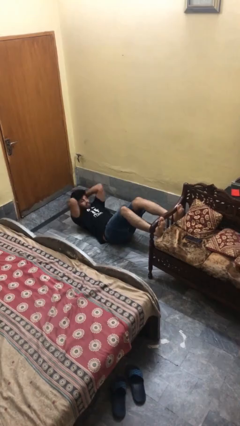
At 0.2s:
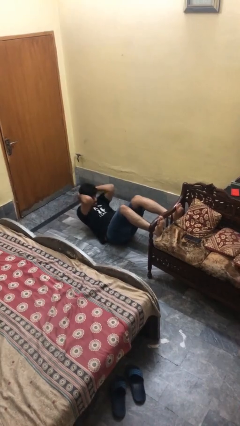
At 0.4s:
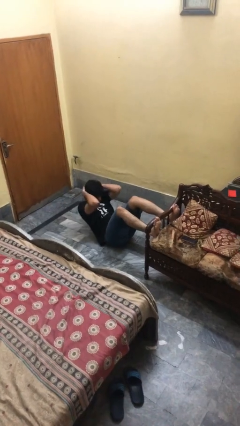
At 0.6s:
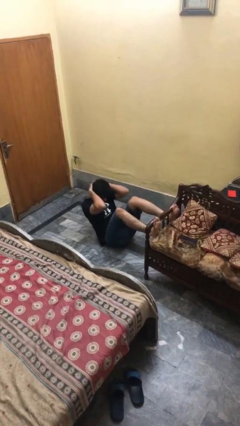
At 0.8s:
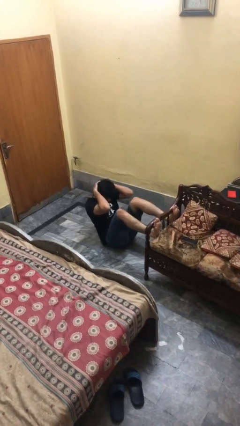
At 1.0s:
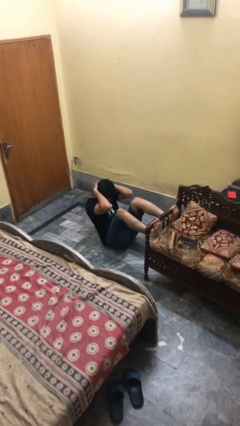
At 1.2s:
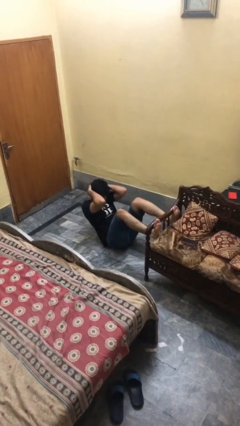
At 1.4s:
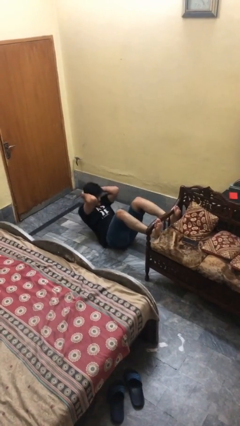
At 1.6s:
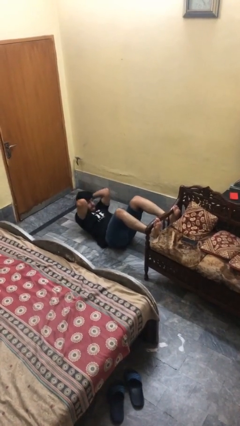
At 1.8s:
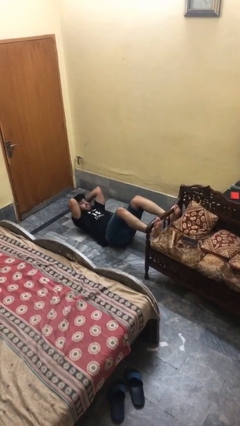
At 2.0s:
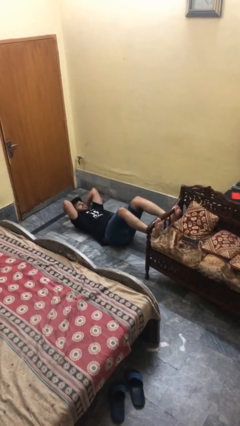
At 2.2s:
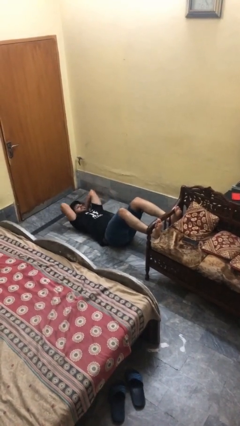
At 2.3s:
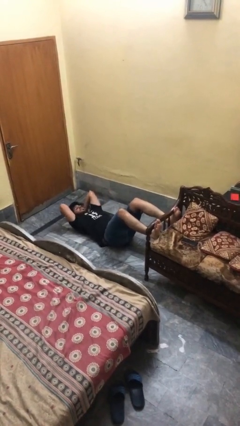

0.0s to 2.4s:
person exercises with situp

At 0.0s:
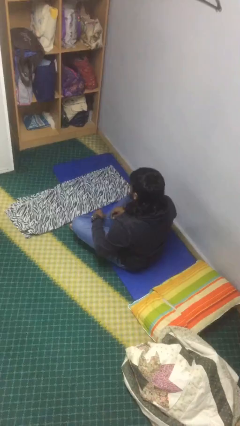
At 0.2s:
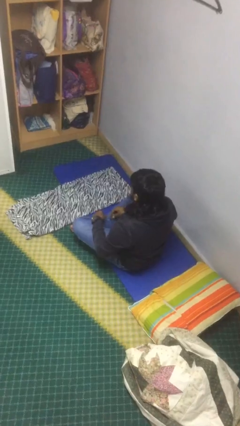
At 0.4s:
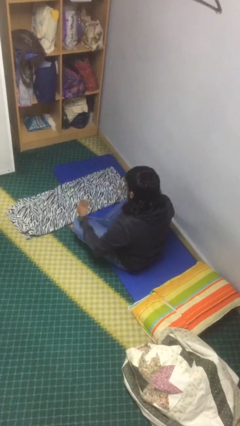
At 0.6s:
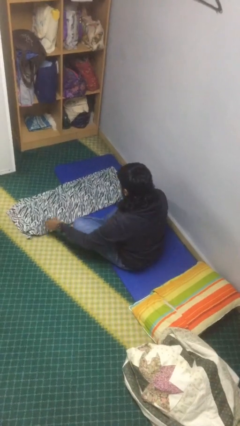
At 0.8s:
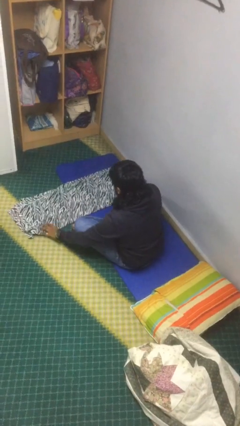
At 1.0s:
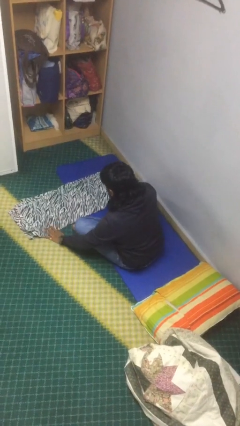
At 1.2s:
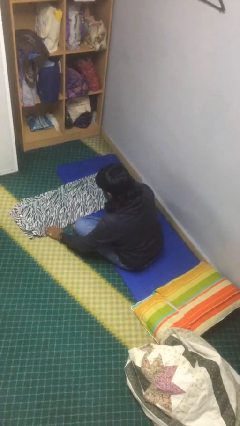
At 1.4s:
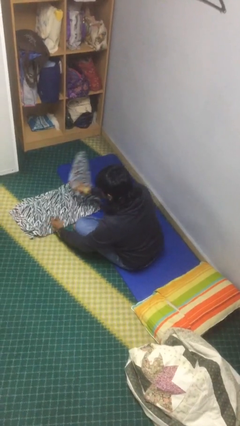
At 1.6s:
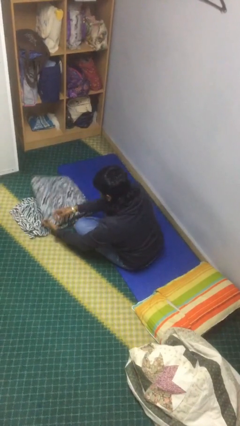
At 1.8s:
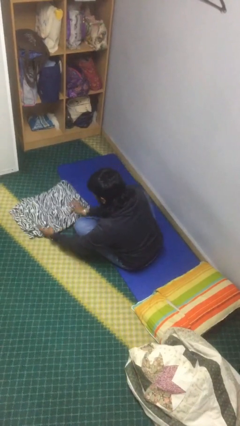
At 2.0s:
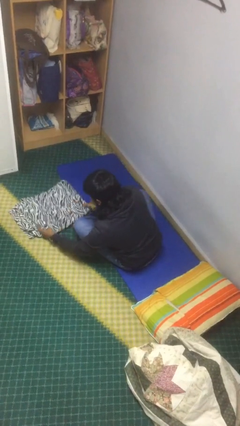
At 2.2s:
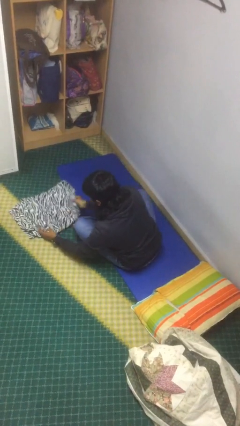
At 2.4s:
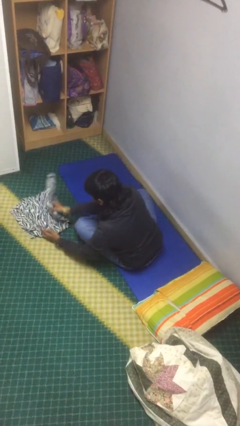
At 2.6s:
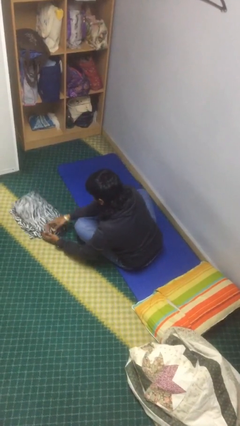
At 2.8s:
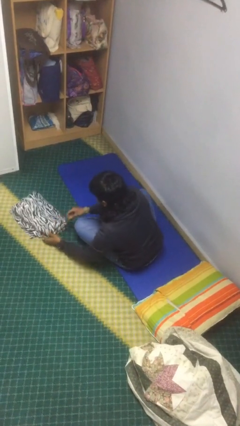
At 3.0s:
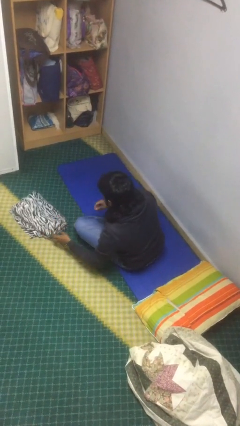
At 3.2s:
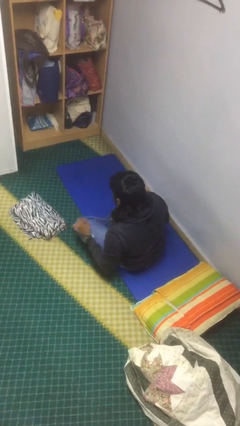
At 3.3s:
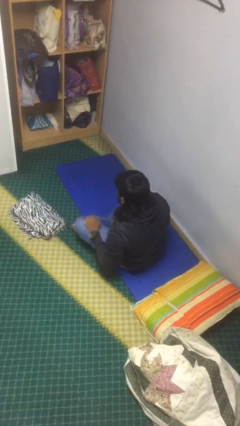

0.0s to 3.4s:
person folds blanket

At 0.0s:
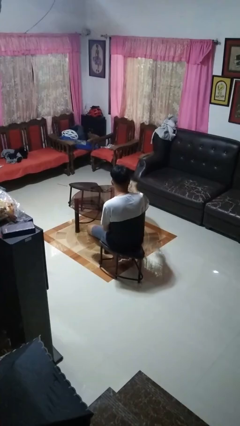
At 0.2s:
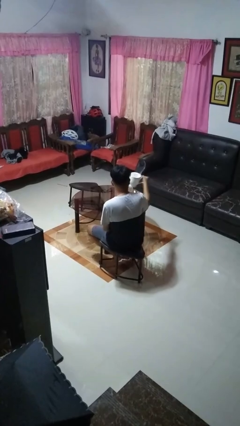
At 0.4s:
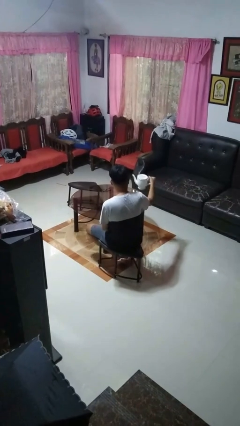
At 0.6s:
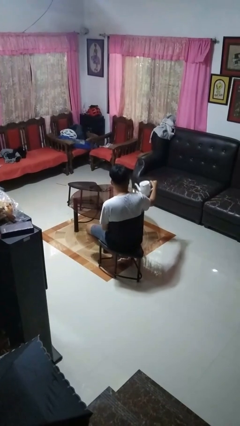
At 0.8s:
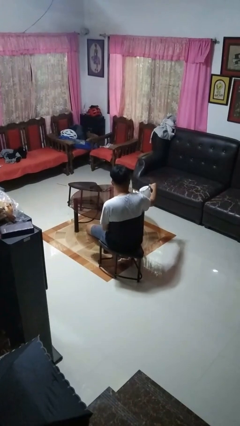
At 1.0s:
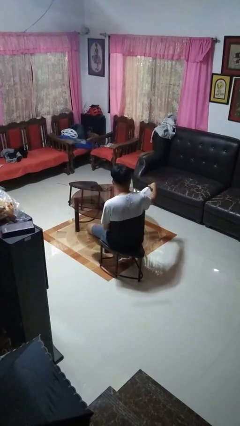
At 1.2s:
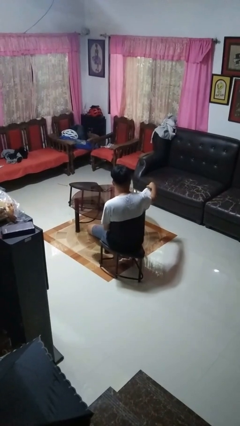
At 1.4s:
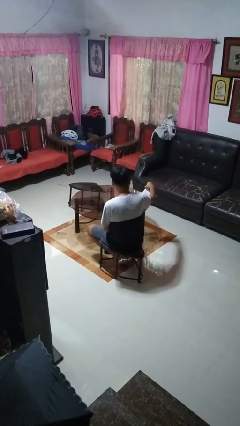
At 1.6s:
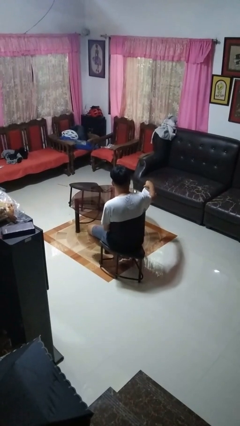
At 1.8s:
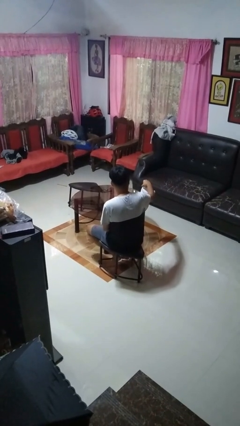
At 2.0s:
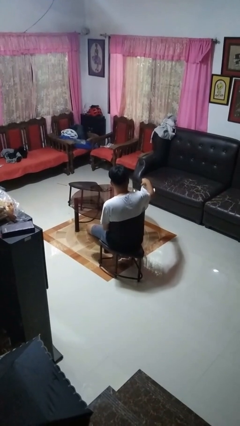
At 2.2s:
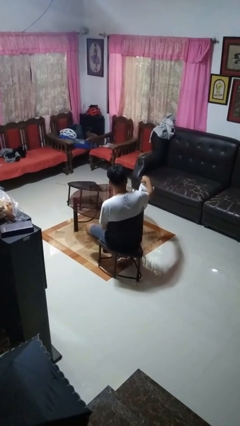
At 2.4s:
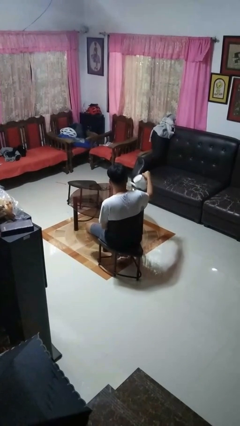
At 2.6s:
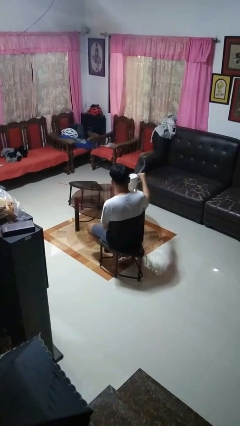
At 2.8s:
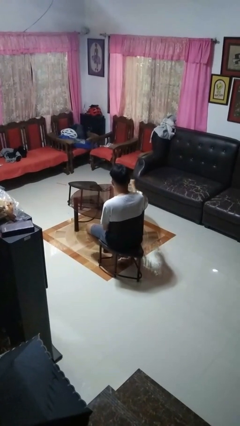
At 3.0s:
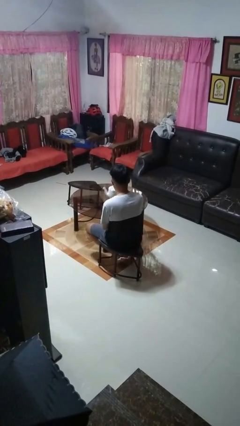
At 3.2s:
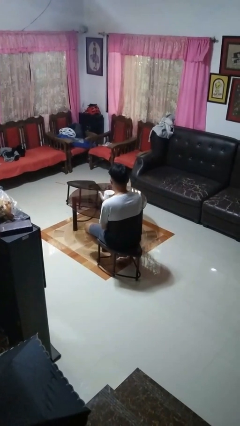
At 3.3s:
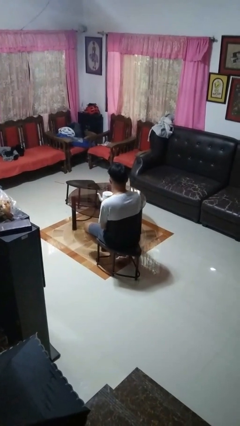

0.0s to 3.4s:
person pours coffee into mug

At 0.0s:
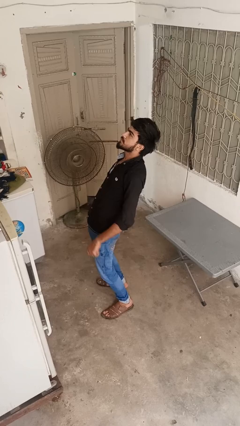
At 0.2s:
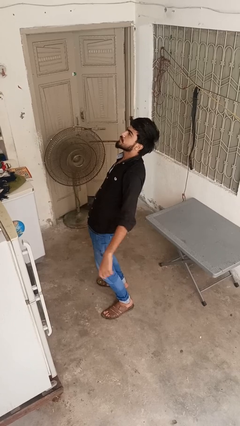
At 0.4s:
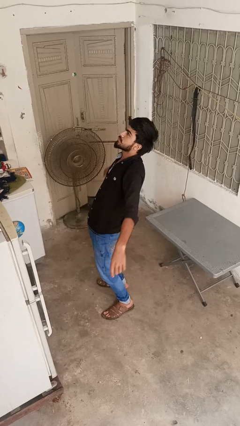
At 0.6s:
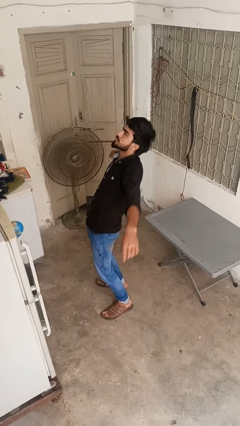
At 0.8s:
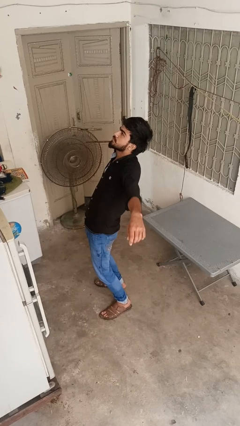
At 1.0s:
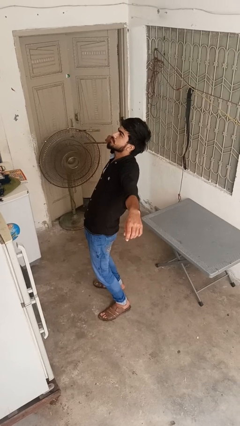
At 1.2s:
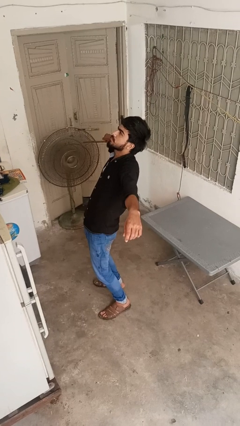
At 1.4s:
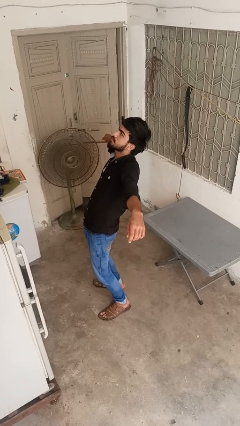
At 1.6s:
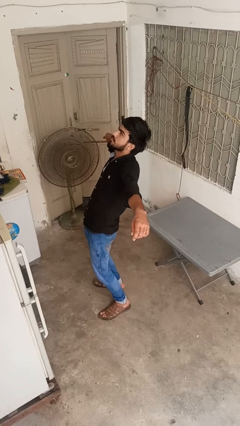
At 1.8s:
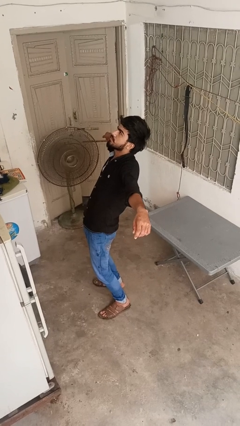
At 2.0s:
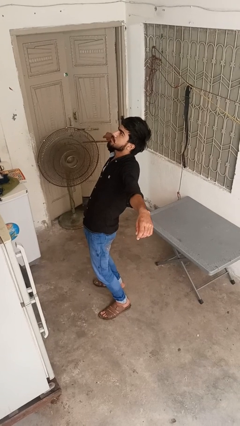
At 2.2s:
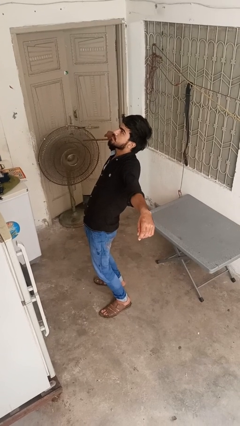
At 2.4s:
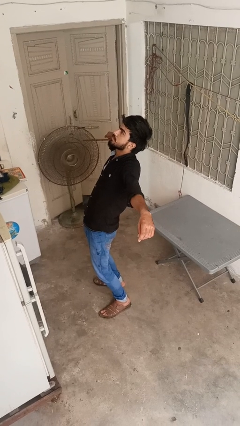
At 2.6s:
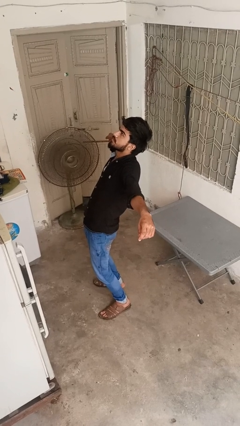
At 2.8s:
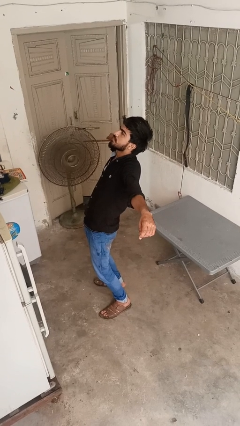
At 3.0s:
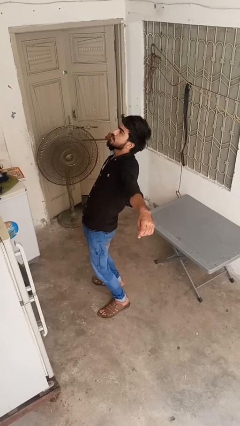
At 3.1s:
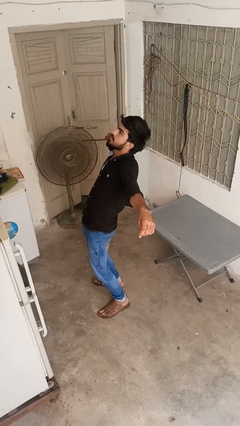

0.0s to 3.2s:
person stretches arms to side

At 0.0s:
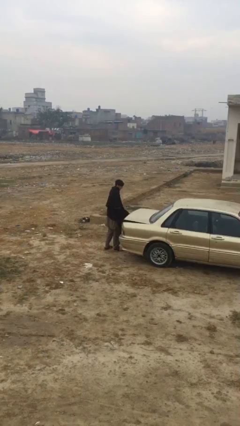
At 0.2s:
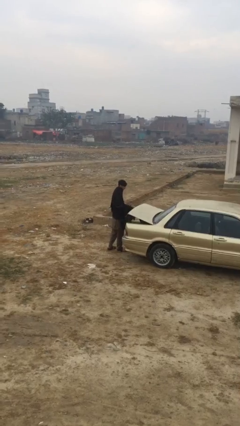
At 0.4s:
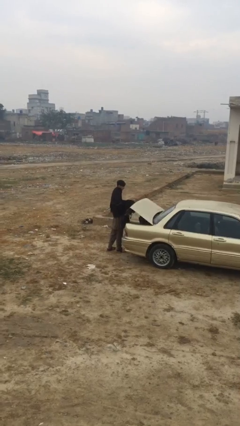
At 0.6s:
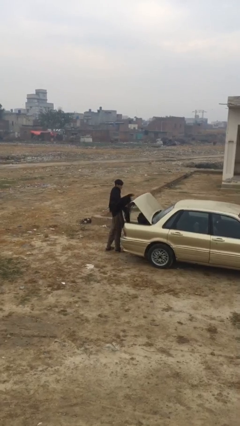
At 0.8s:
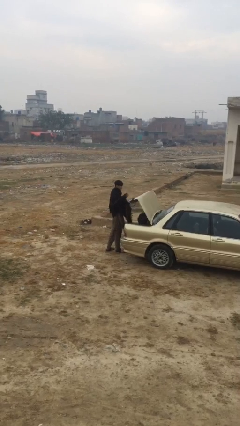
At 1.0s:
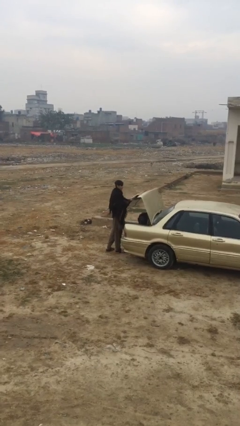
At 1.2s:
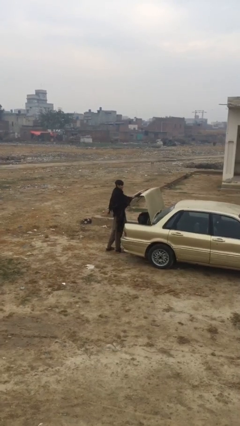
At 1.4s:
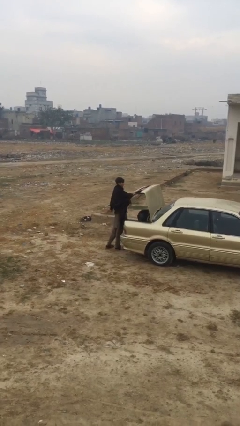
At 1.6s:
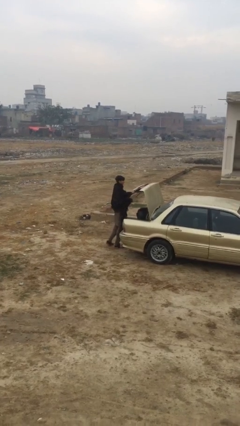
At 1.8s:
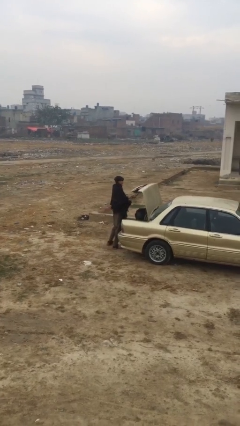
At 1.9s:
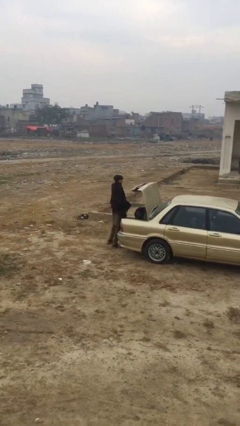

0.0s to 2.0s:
person opens car trunk

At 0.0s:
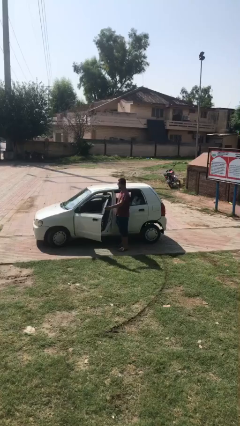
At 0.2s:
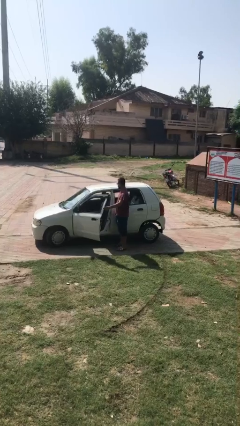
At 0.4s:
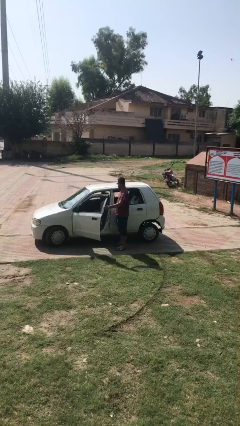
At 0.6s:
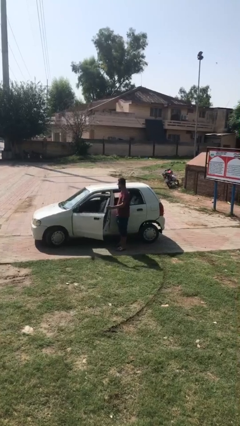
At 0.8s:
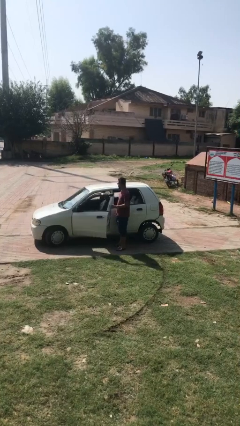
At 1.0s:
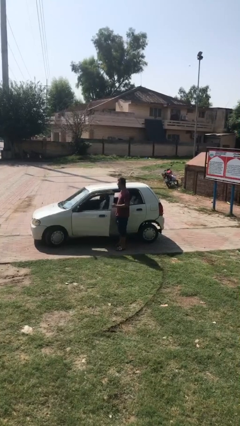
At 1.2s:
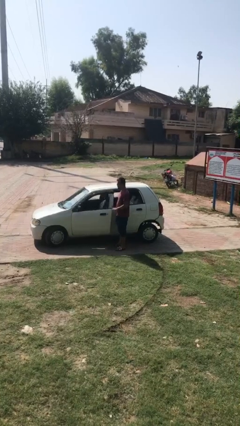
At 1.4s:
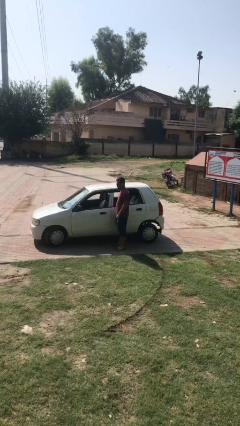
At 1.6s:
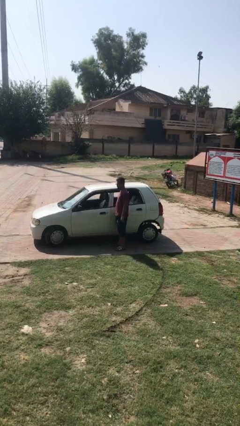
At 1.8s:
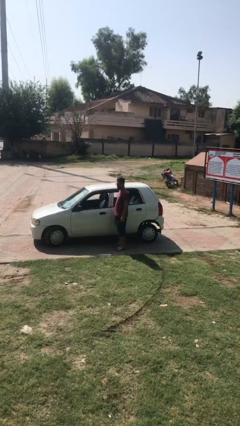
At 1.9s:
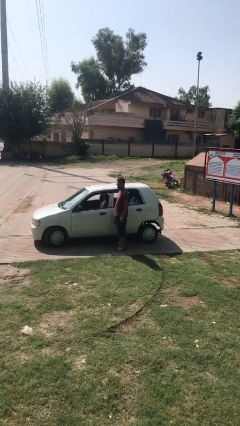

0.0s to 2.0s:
person closes car door

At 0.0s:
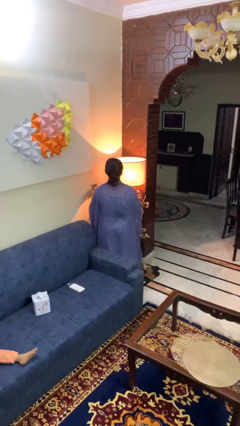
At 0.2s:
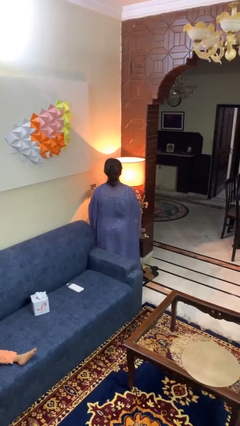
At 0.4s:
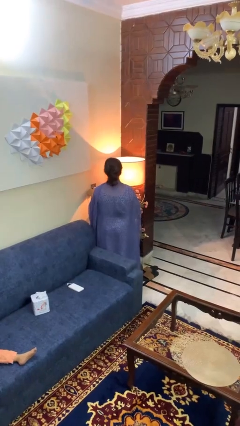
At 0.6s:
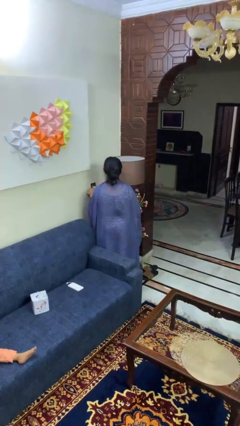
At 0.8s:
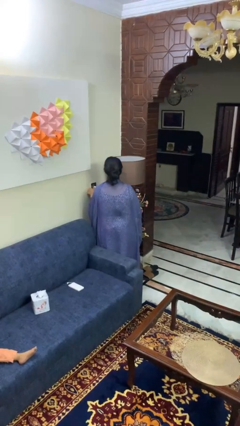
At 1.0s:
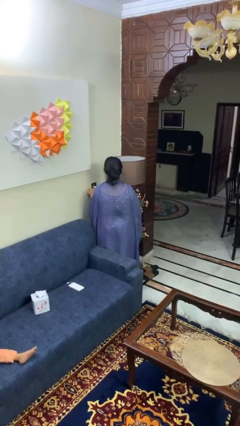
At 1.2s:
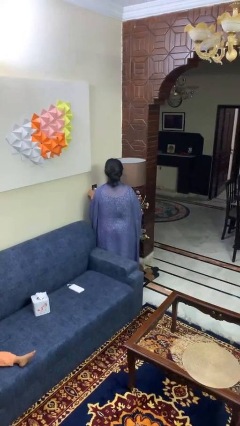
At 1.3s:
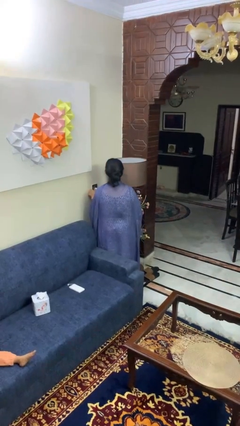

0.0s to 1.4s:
person turns off lamp
